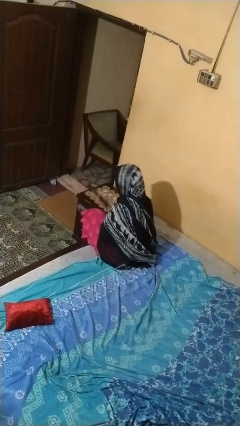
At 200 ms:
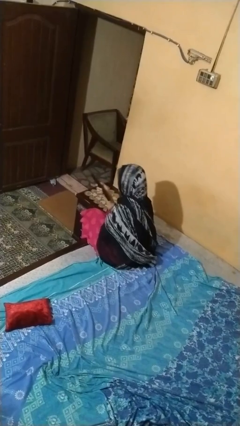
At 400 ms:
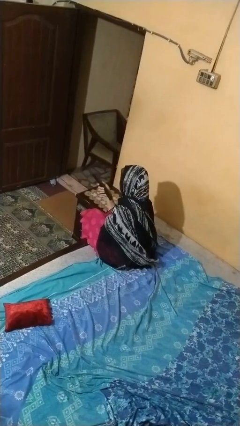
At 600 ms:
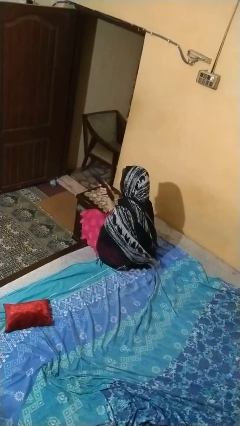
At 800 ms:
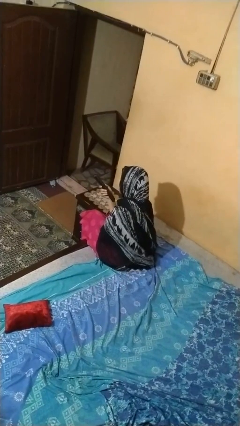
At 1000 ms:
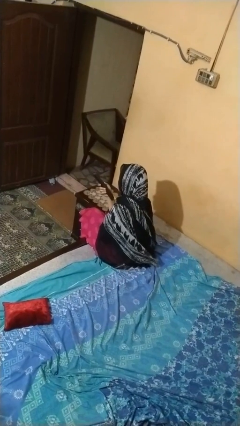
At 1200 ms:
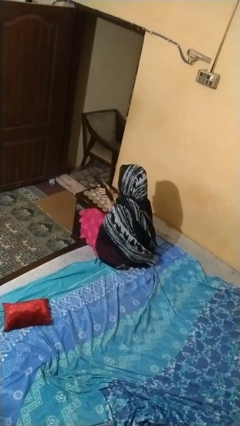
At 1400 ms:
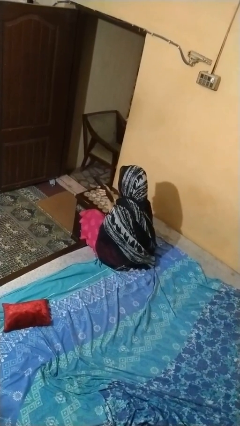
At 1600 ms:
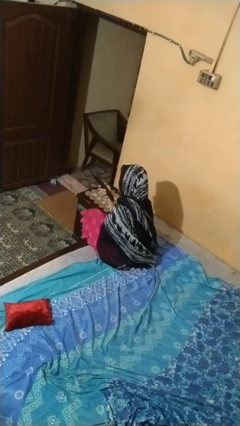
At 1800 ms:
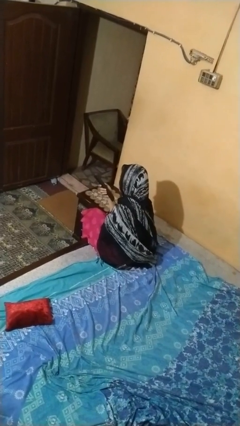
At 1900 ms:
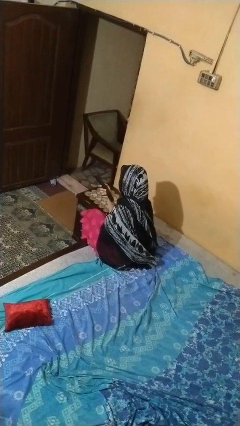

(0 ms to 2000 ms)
person uses television remote

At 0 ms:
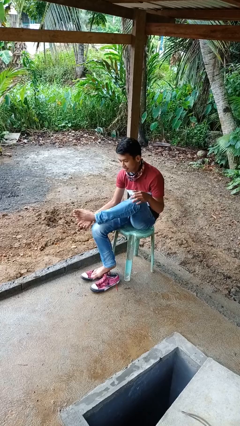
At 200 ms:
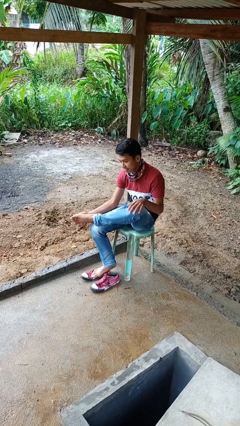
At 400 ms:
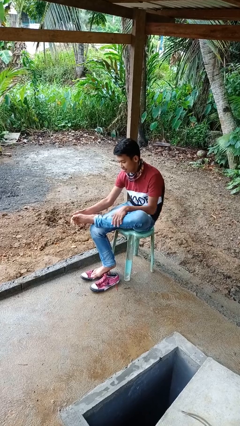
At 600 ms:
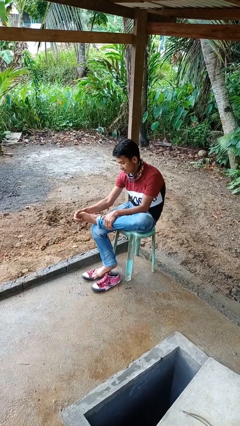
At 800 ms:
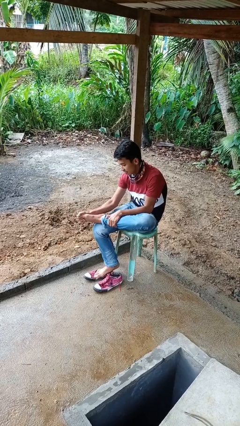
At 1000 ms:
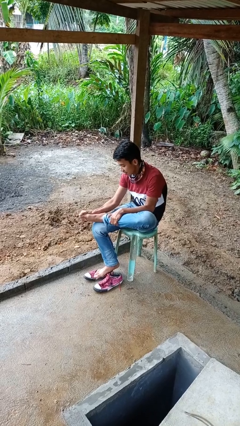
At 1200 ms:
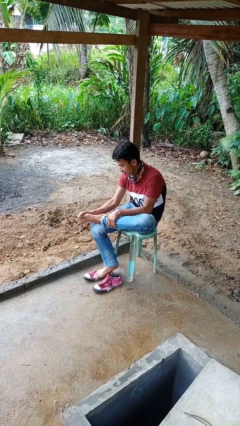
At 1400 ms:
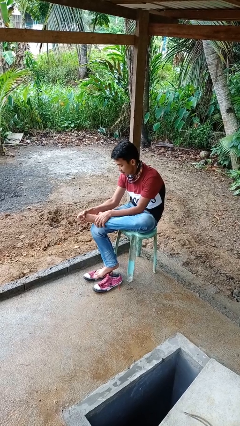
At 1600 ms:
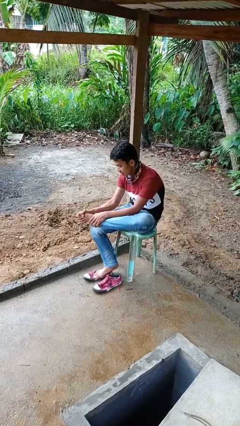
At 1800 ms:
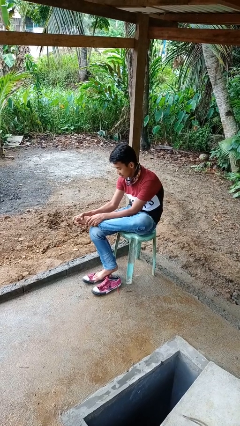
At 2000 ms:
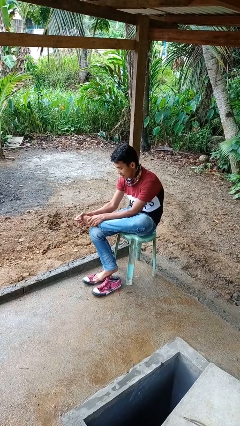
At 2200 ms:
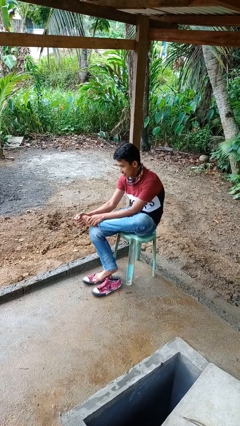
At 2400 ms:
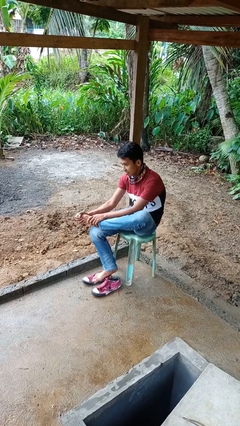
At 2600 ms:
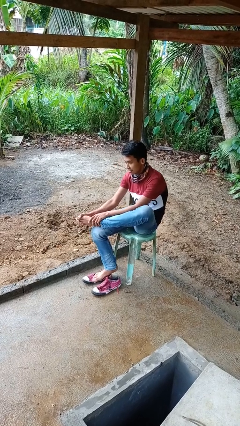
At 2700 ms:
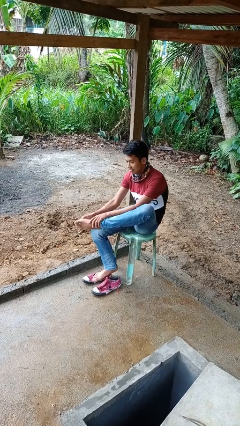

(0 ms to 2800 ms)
person rubs foot

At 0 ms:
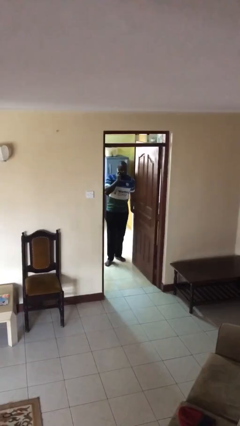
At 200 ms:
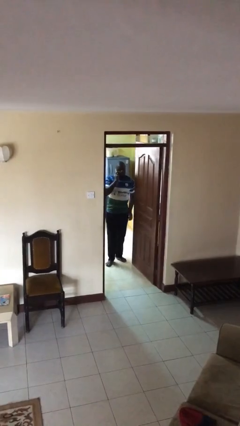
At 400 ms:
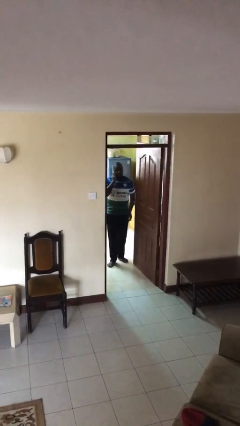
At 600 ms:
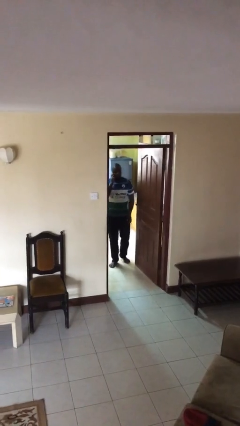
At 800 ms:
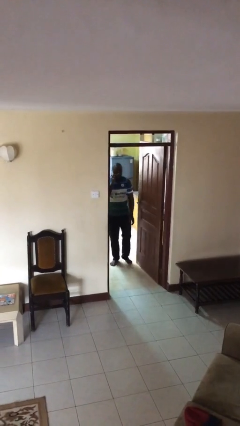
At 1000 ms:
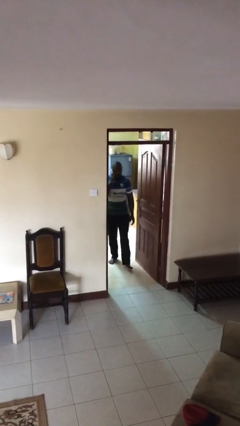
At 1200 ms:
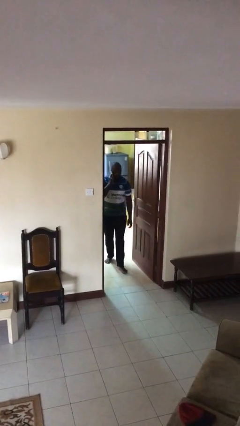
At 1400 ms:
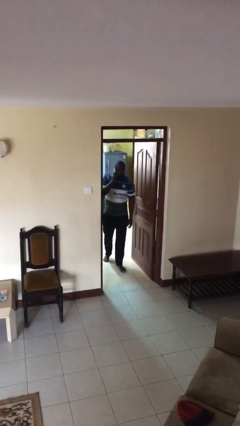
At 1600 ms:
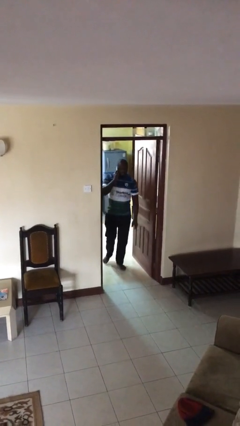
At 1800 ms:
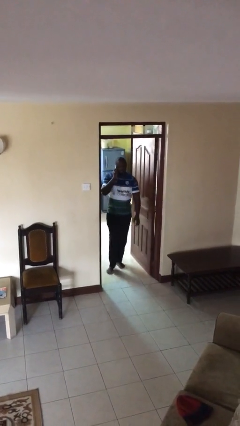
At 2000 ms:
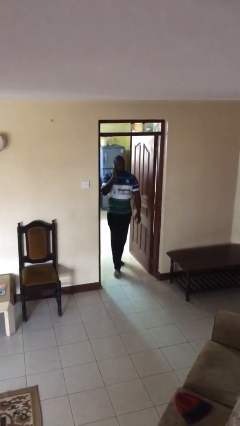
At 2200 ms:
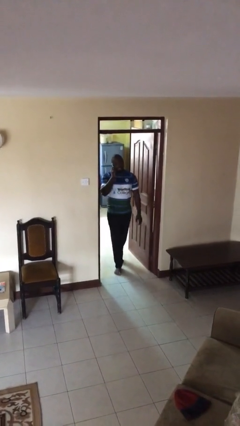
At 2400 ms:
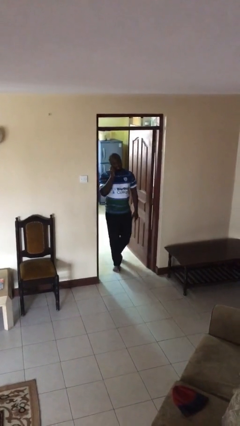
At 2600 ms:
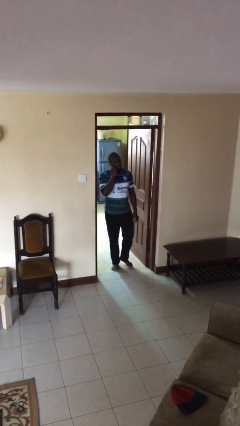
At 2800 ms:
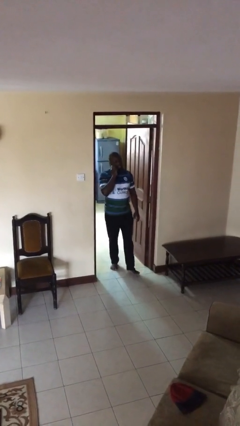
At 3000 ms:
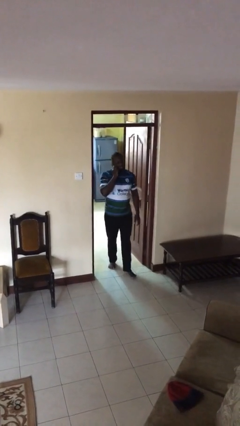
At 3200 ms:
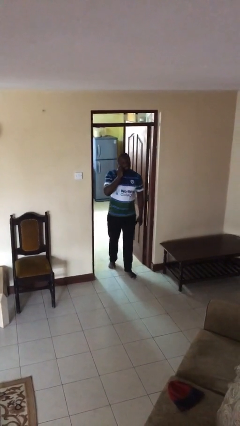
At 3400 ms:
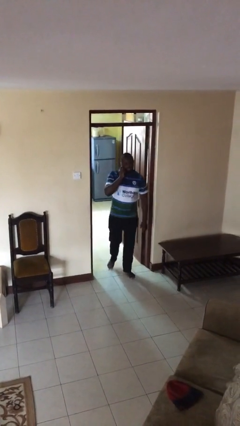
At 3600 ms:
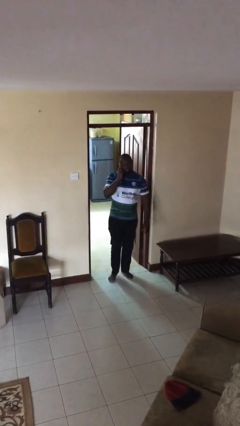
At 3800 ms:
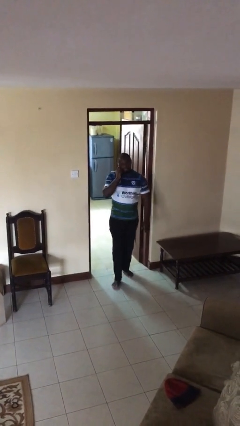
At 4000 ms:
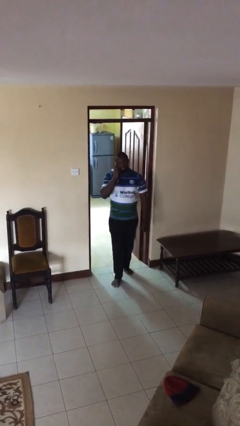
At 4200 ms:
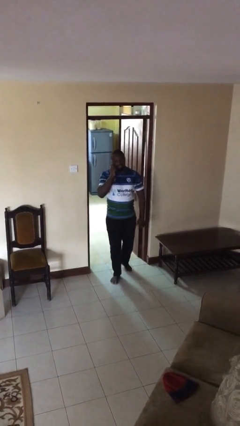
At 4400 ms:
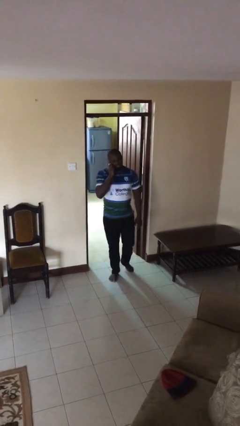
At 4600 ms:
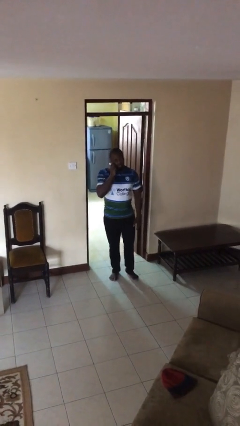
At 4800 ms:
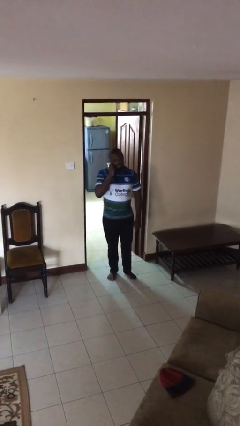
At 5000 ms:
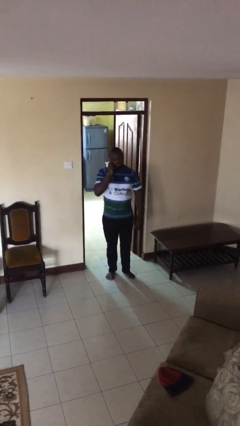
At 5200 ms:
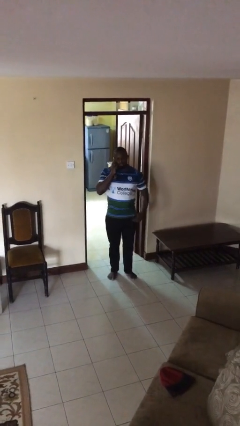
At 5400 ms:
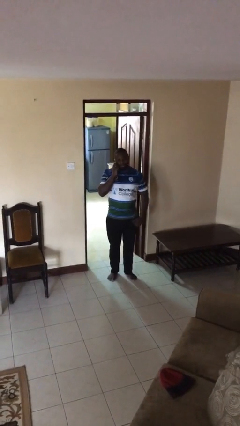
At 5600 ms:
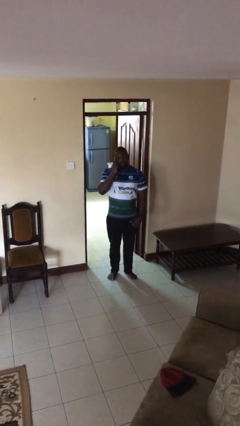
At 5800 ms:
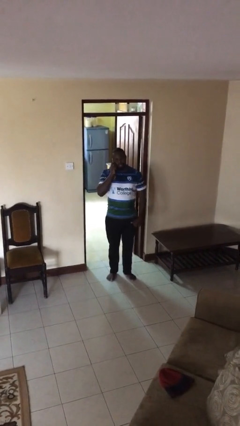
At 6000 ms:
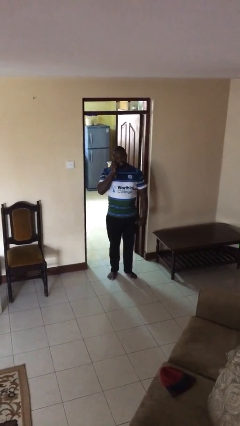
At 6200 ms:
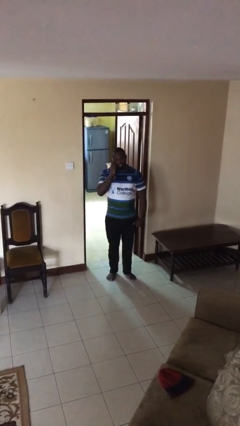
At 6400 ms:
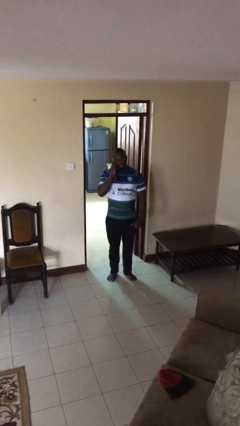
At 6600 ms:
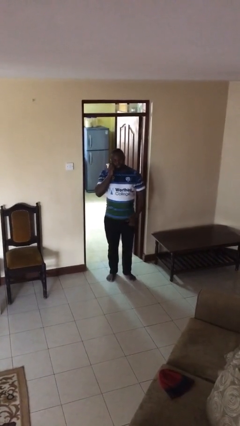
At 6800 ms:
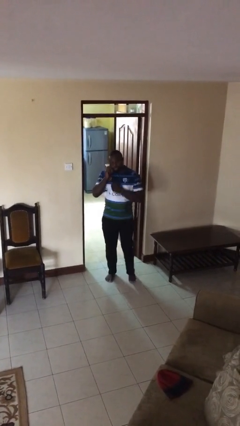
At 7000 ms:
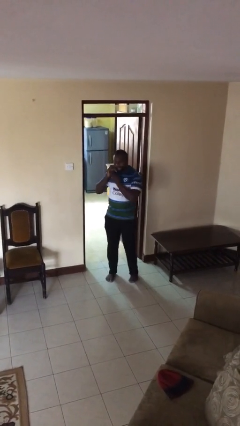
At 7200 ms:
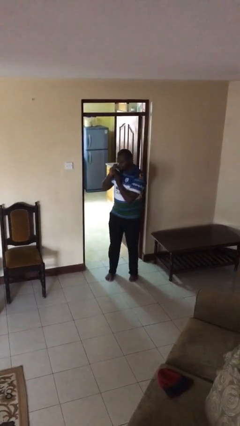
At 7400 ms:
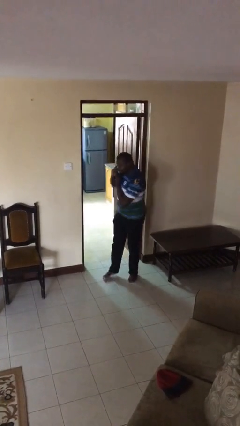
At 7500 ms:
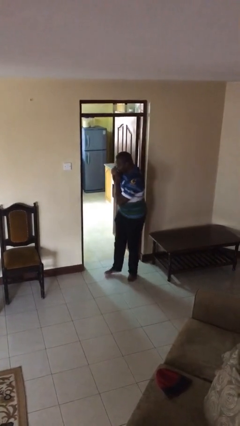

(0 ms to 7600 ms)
person enters scene through structure

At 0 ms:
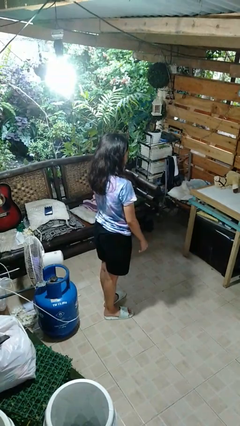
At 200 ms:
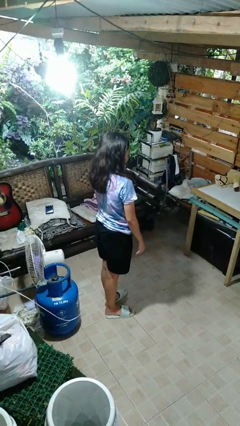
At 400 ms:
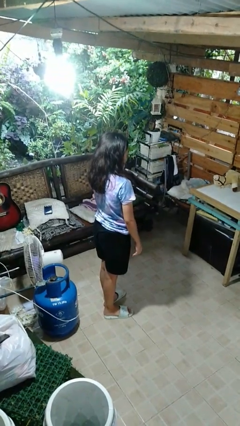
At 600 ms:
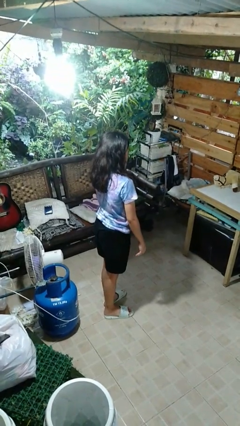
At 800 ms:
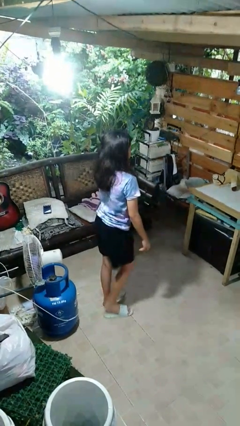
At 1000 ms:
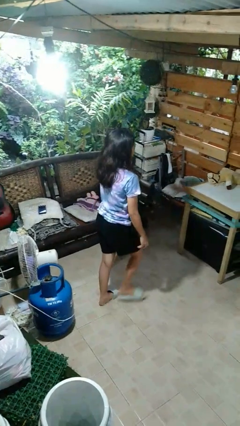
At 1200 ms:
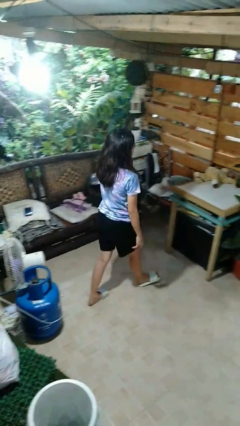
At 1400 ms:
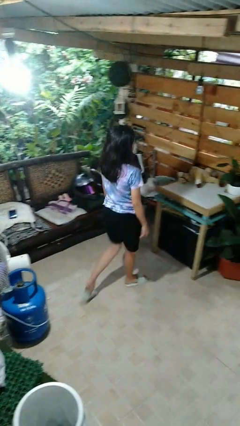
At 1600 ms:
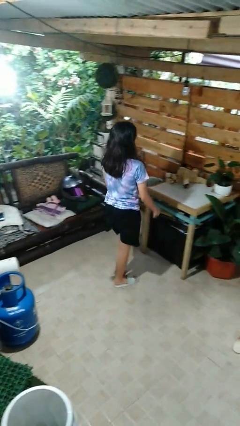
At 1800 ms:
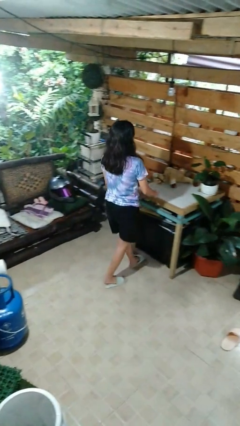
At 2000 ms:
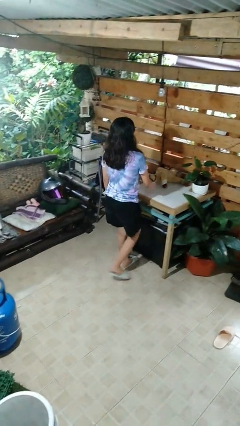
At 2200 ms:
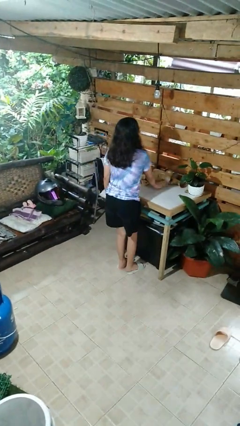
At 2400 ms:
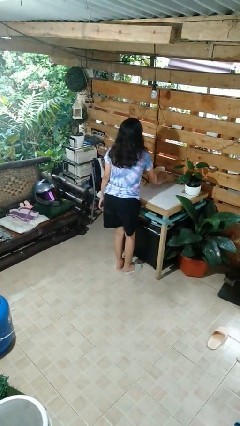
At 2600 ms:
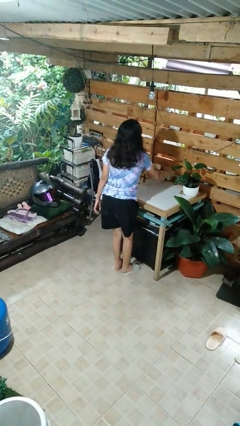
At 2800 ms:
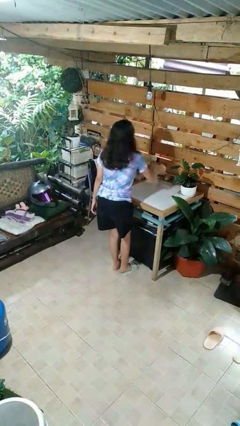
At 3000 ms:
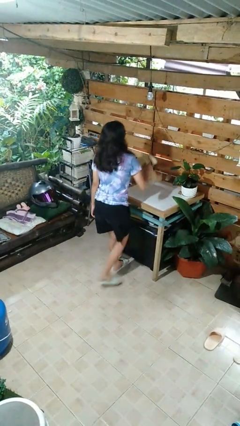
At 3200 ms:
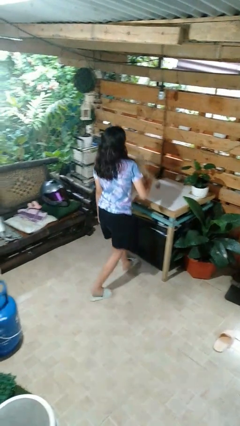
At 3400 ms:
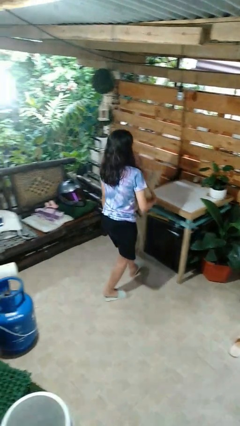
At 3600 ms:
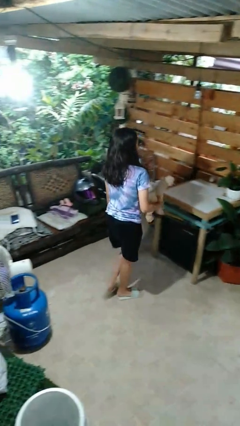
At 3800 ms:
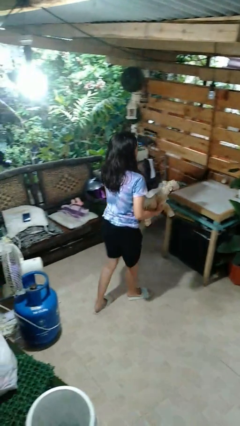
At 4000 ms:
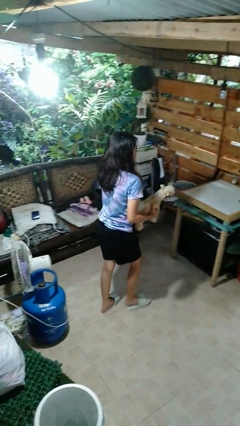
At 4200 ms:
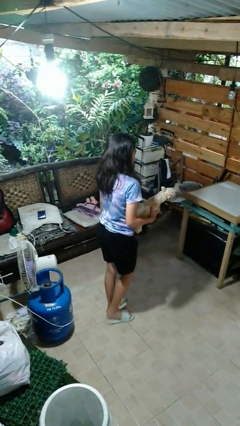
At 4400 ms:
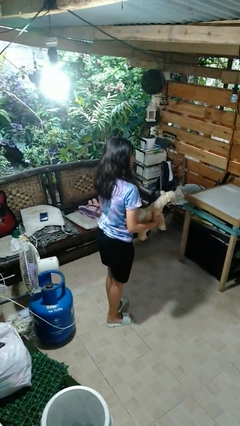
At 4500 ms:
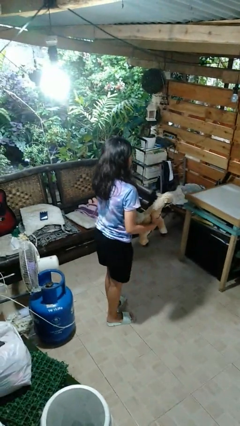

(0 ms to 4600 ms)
person picks up object from table

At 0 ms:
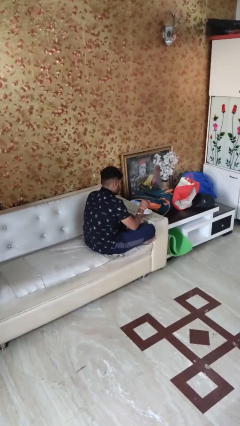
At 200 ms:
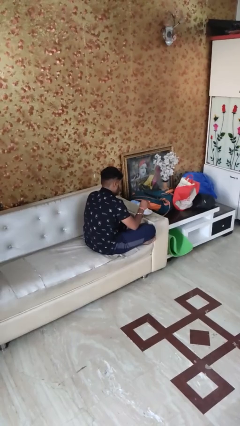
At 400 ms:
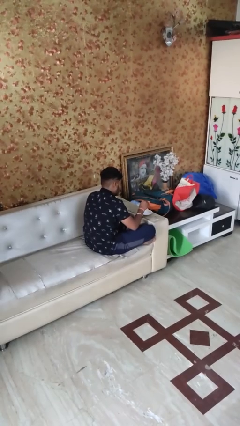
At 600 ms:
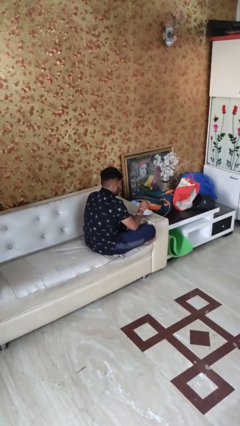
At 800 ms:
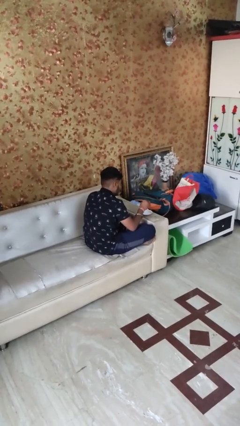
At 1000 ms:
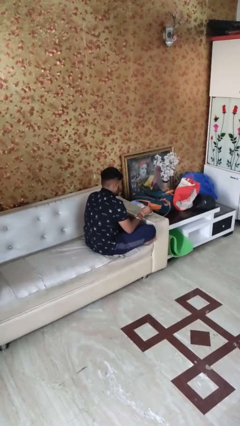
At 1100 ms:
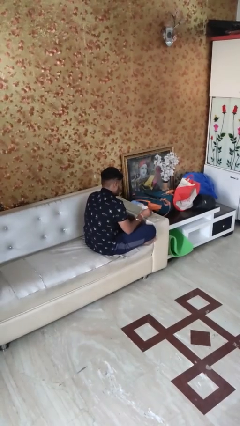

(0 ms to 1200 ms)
person stirs mug
